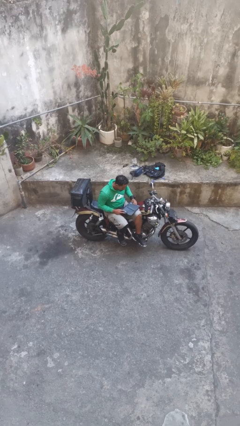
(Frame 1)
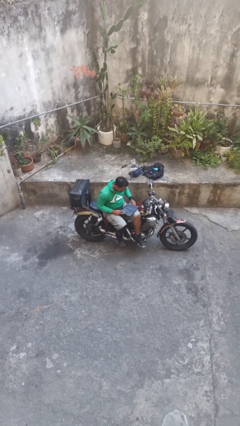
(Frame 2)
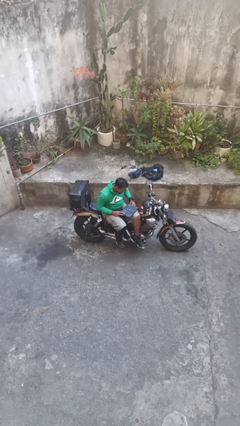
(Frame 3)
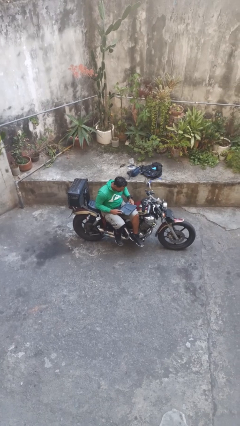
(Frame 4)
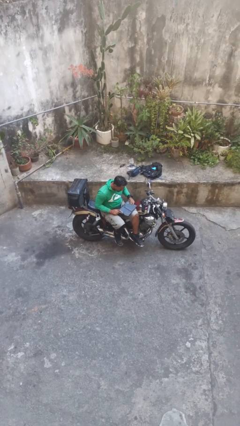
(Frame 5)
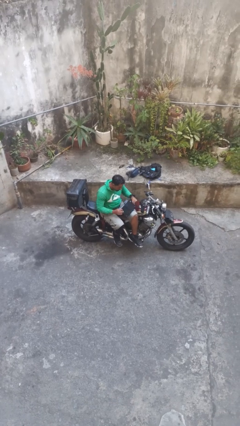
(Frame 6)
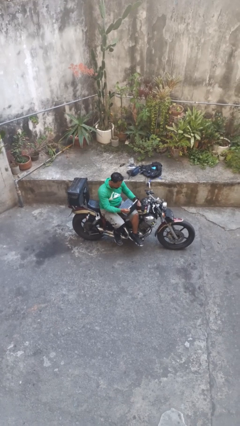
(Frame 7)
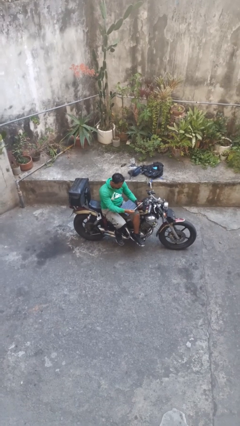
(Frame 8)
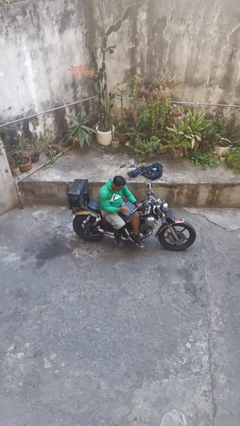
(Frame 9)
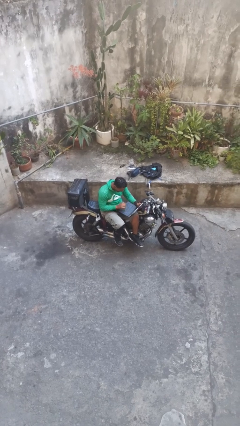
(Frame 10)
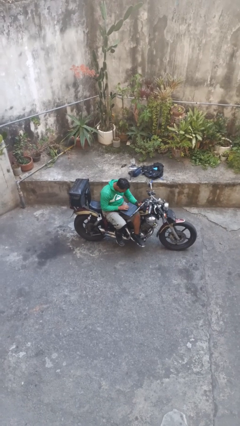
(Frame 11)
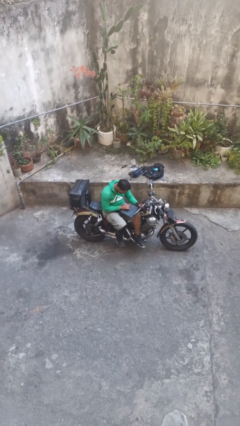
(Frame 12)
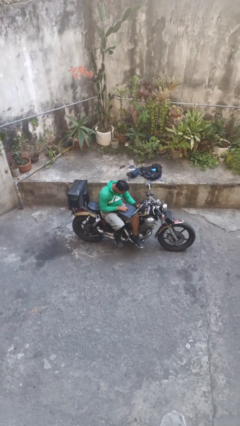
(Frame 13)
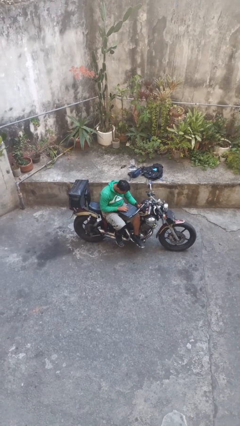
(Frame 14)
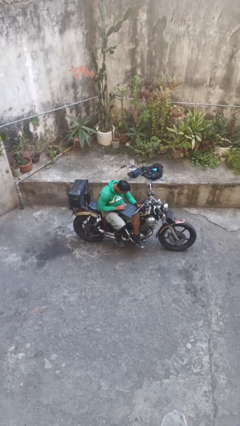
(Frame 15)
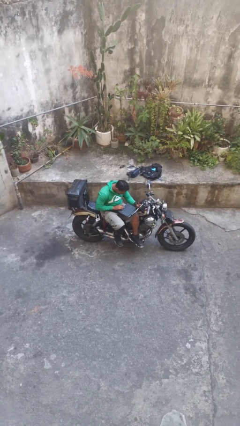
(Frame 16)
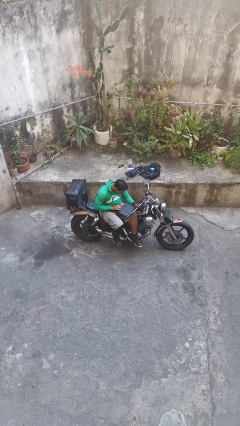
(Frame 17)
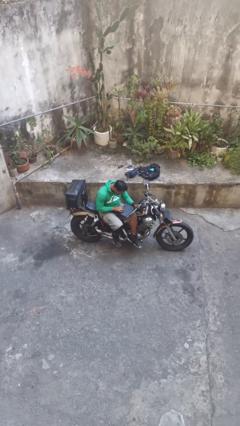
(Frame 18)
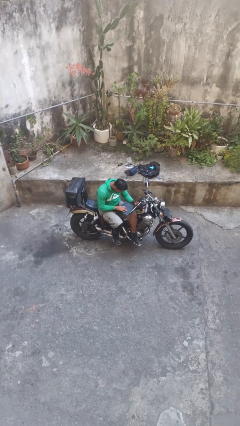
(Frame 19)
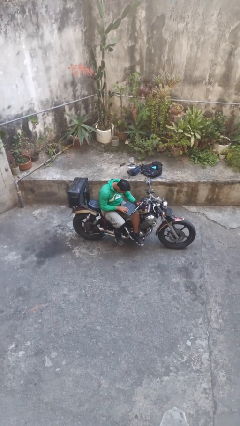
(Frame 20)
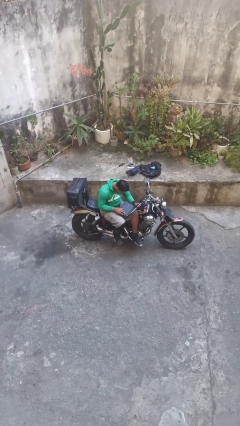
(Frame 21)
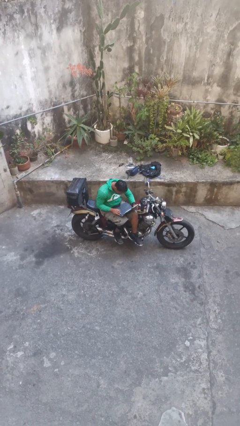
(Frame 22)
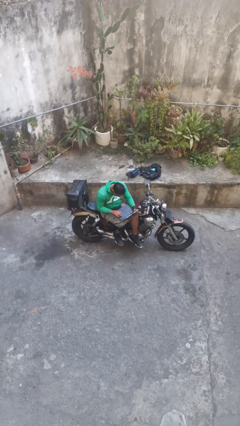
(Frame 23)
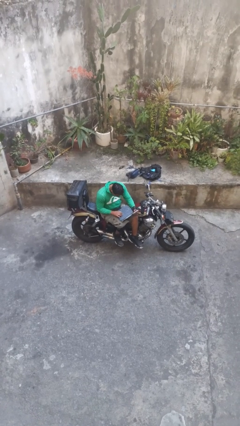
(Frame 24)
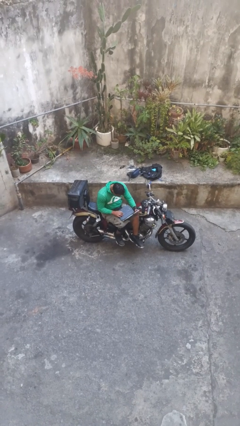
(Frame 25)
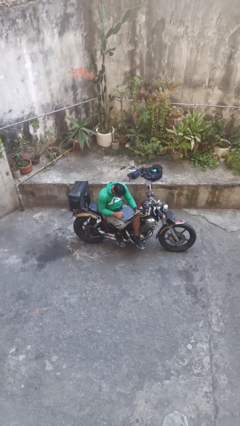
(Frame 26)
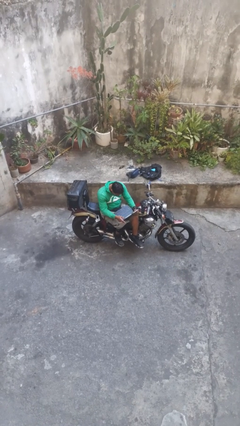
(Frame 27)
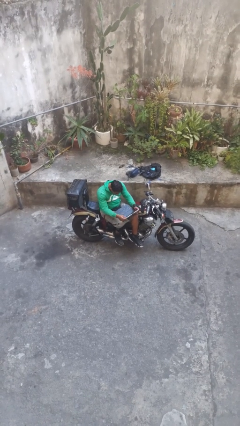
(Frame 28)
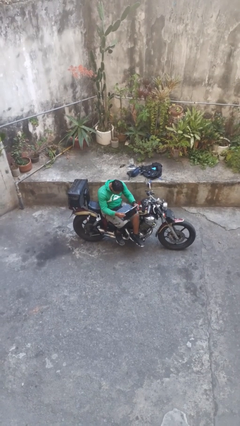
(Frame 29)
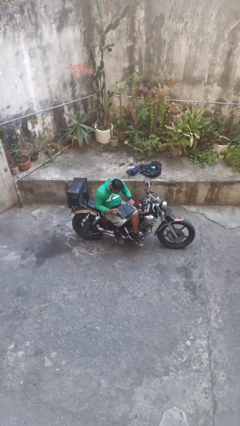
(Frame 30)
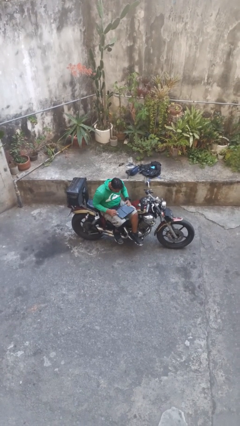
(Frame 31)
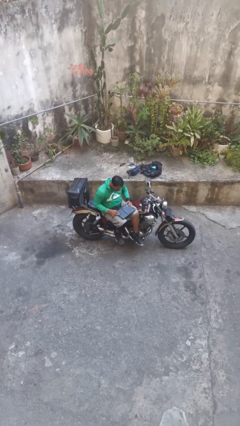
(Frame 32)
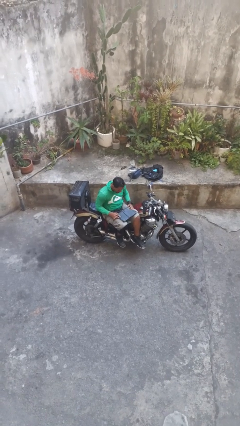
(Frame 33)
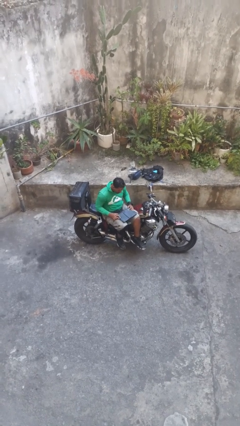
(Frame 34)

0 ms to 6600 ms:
person interacts with laptop

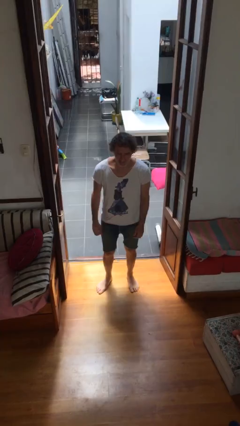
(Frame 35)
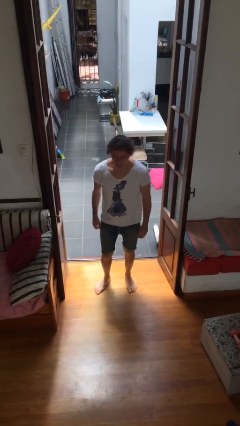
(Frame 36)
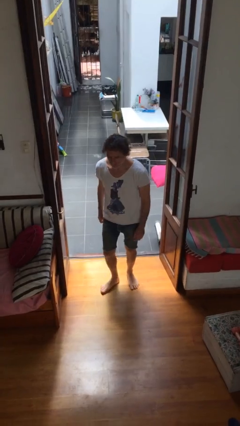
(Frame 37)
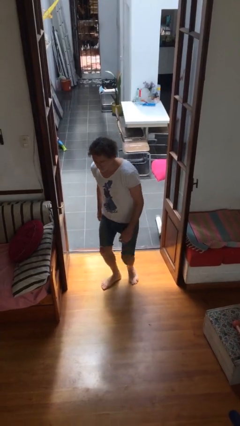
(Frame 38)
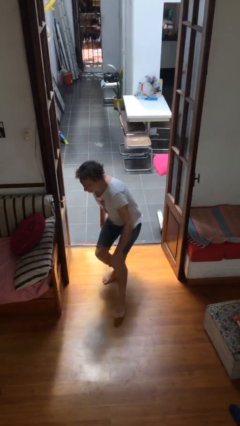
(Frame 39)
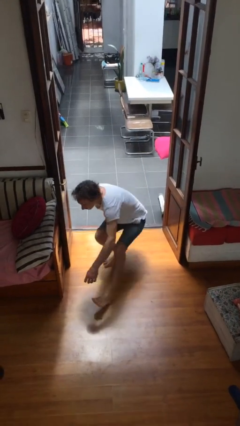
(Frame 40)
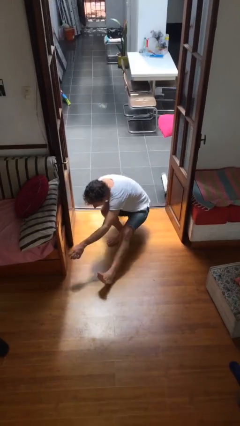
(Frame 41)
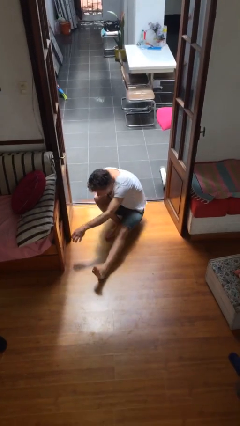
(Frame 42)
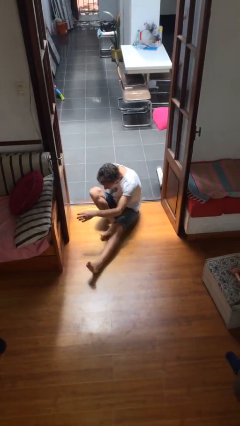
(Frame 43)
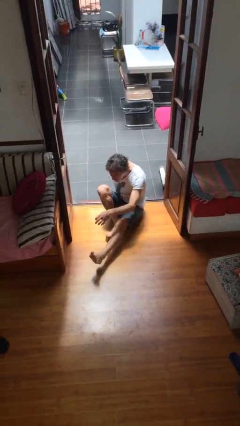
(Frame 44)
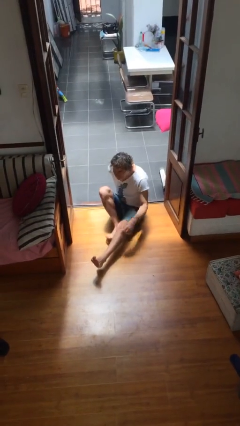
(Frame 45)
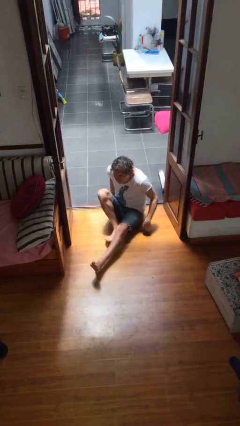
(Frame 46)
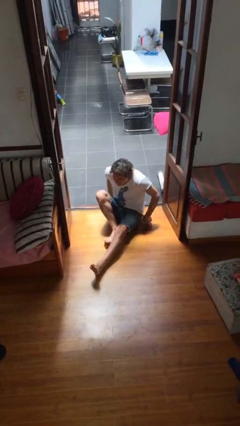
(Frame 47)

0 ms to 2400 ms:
person sits down

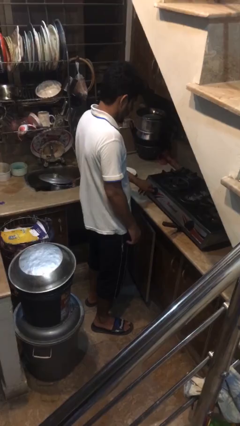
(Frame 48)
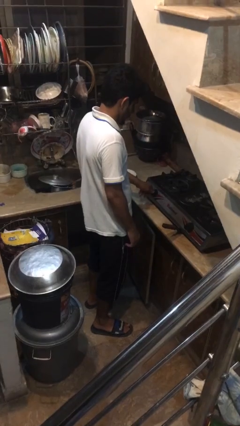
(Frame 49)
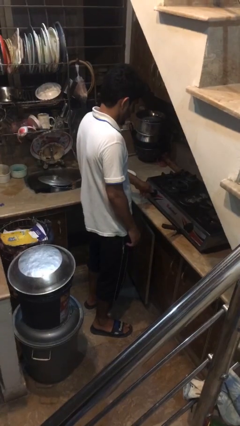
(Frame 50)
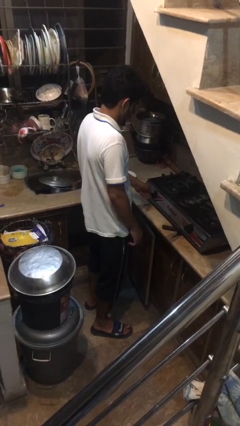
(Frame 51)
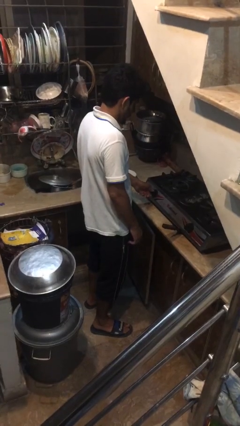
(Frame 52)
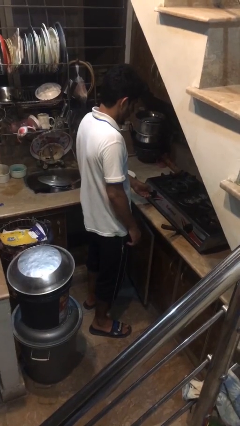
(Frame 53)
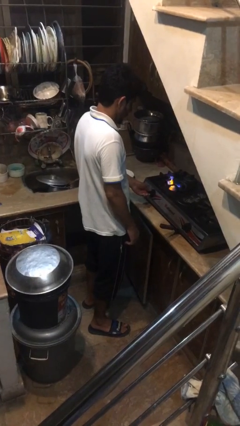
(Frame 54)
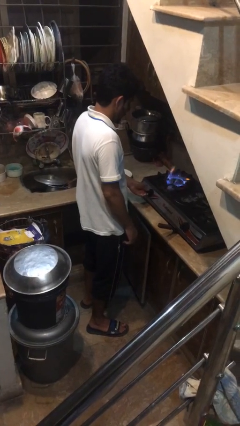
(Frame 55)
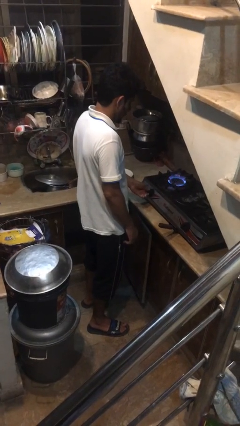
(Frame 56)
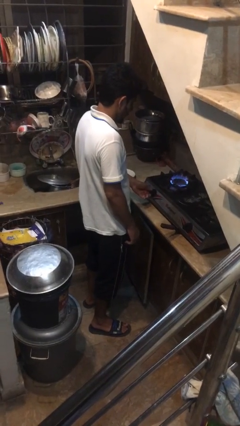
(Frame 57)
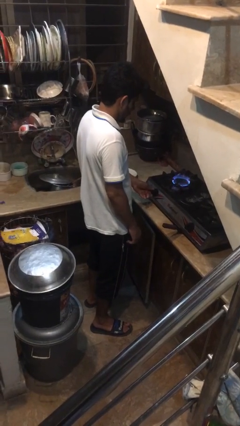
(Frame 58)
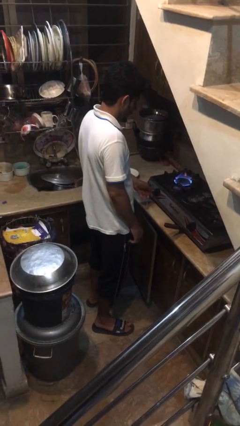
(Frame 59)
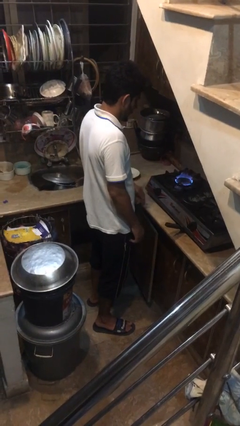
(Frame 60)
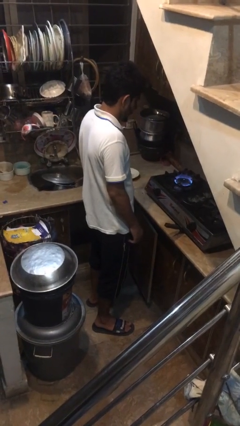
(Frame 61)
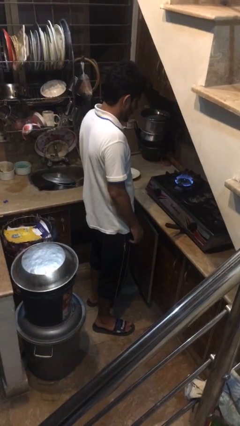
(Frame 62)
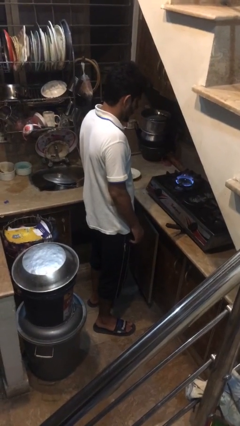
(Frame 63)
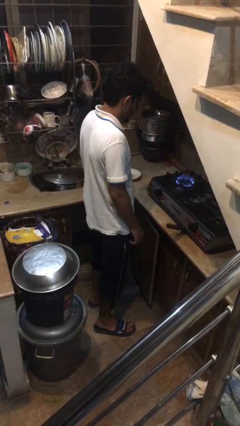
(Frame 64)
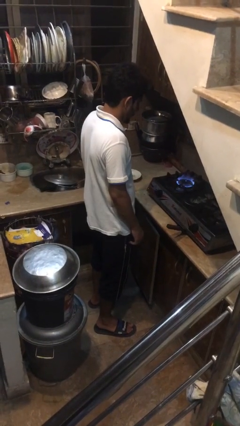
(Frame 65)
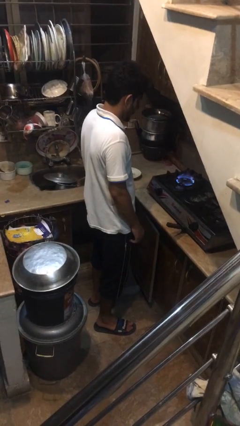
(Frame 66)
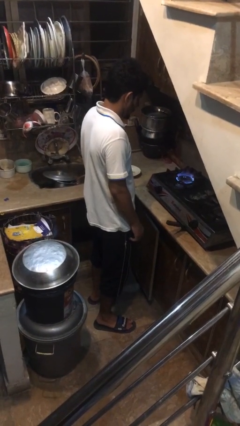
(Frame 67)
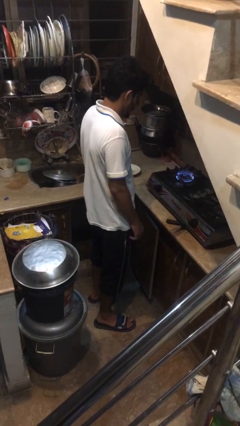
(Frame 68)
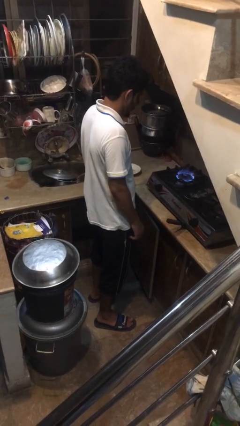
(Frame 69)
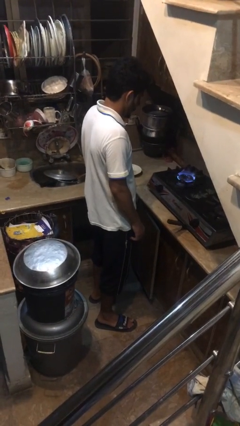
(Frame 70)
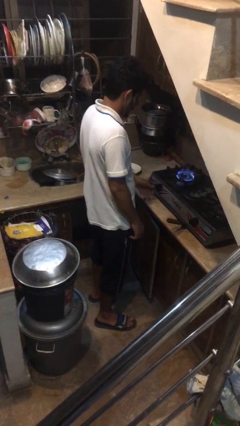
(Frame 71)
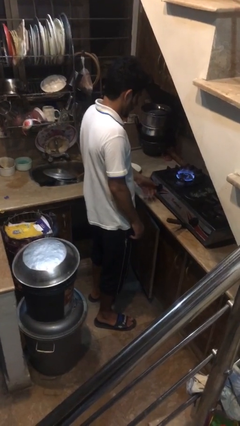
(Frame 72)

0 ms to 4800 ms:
person turns on stovetop

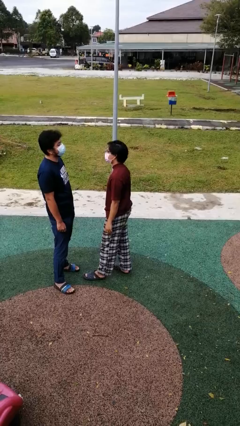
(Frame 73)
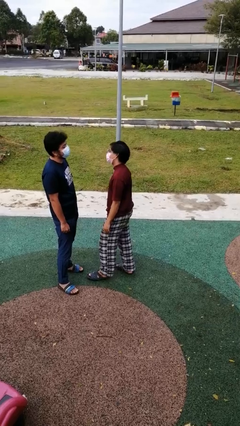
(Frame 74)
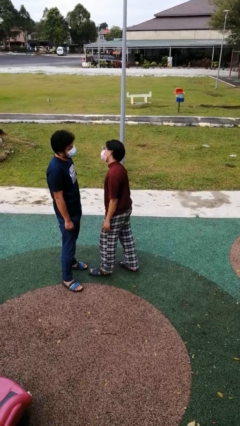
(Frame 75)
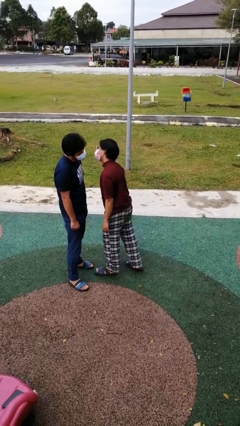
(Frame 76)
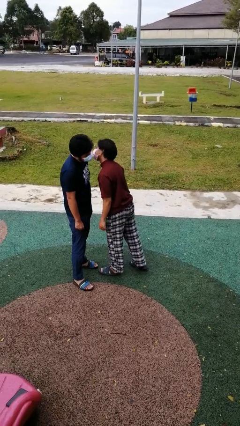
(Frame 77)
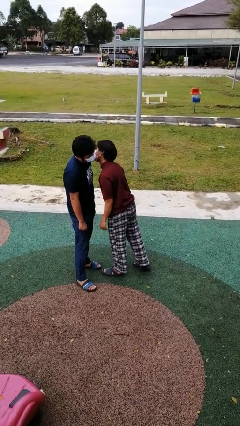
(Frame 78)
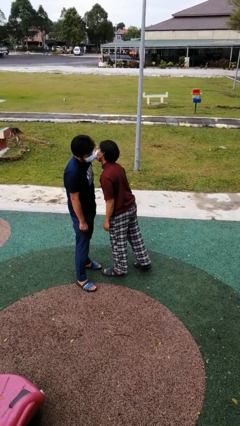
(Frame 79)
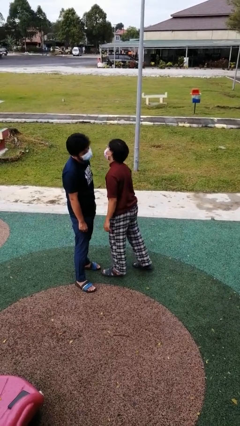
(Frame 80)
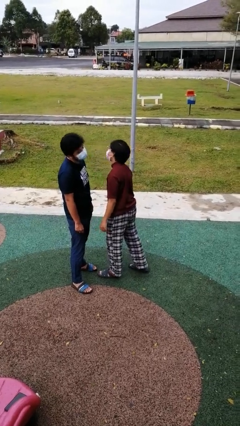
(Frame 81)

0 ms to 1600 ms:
person kisses cheek of person

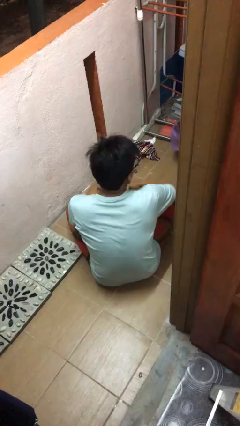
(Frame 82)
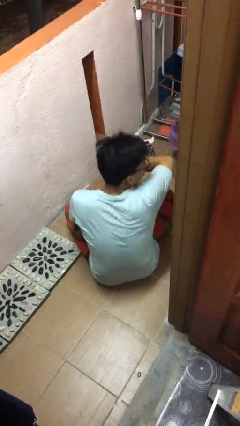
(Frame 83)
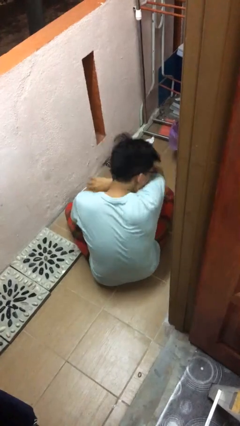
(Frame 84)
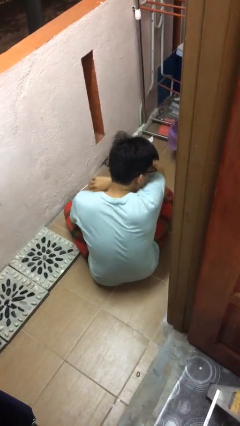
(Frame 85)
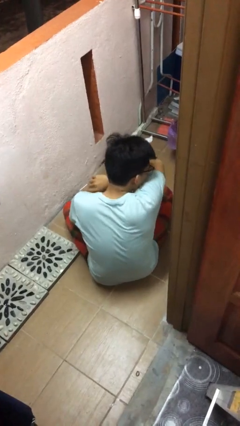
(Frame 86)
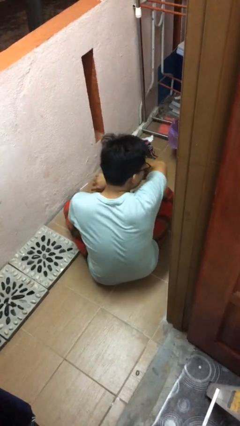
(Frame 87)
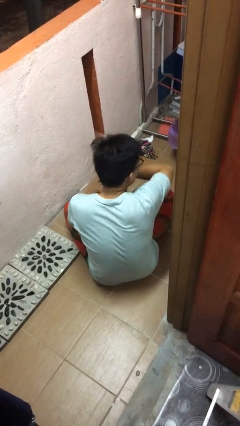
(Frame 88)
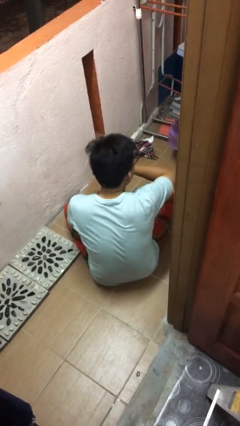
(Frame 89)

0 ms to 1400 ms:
person sneezes into arm

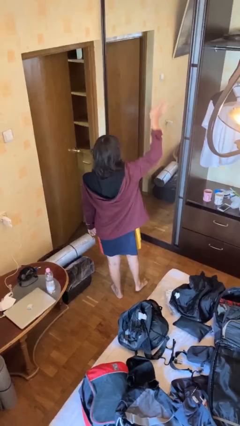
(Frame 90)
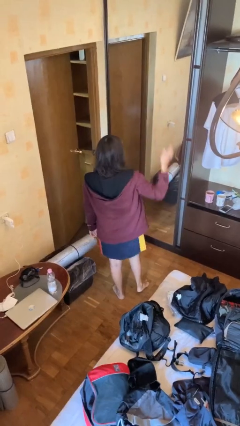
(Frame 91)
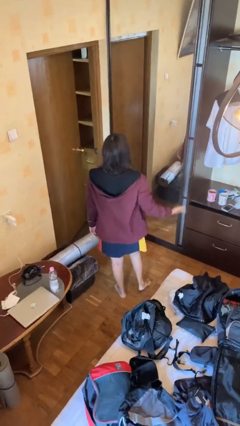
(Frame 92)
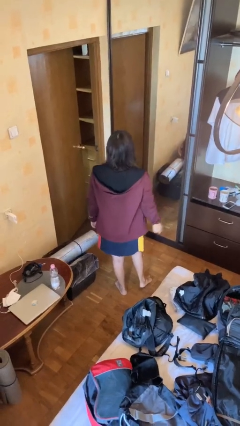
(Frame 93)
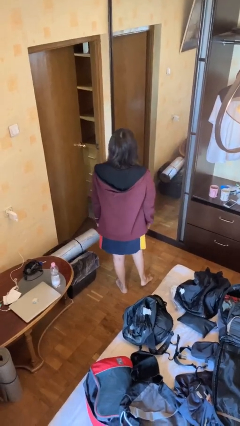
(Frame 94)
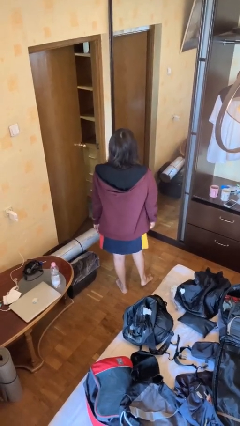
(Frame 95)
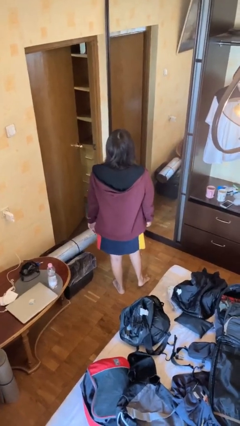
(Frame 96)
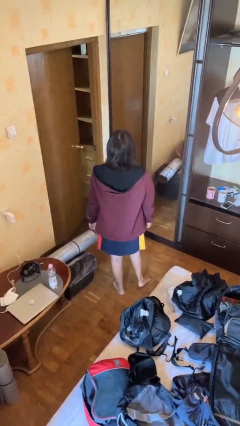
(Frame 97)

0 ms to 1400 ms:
person gestures swipe down
